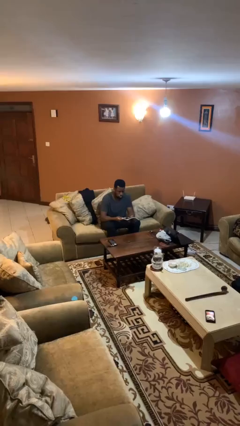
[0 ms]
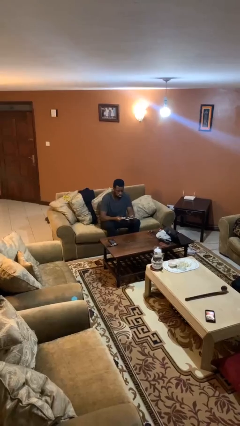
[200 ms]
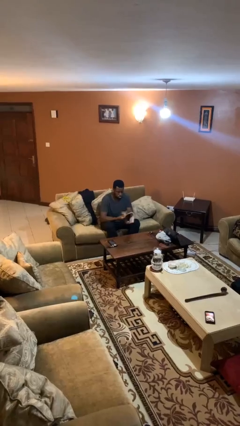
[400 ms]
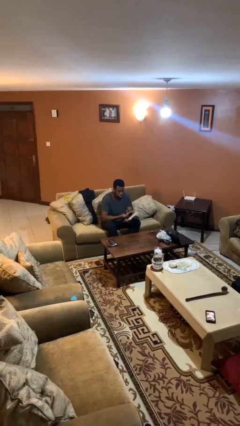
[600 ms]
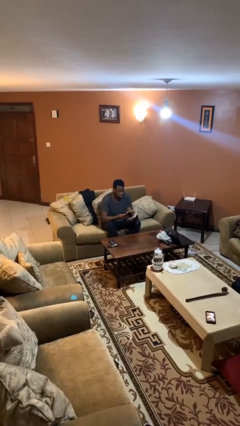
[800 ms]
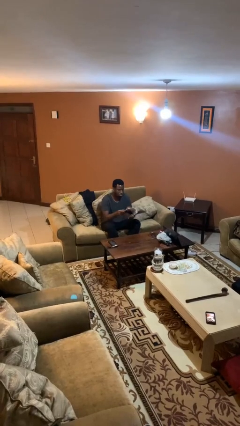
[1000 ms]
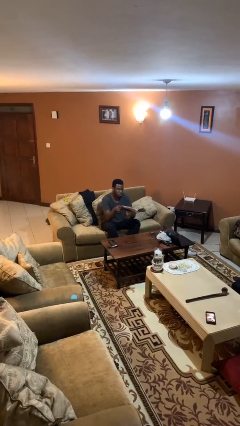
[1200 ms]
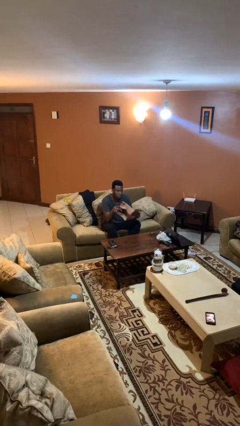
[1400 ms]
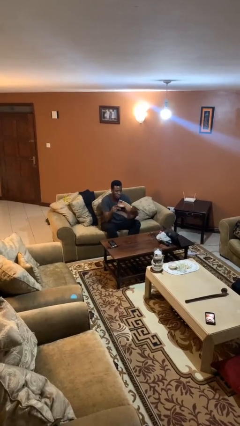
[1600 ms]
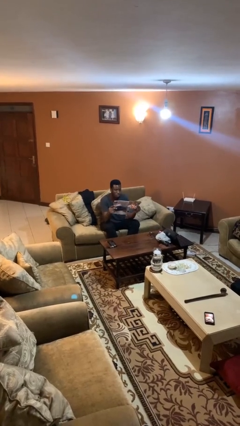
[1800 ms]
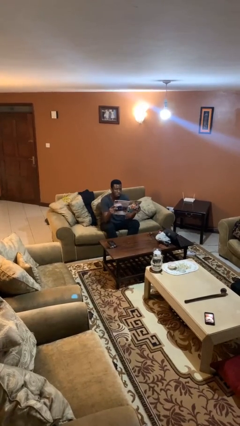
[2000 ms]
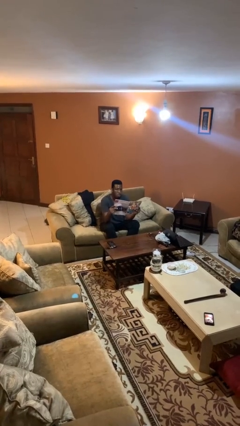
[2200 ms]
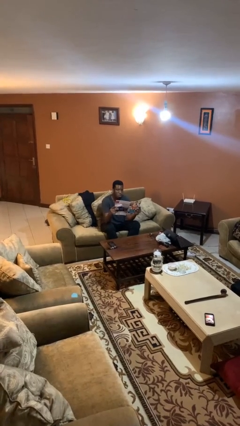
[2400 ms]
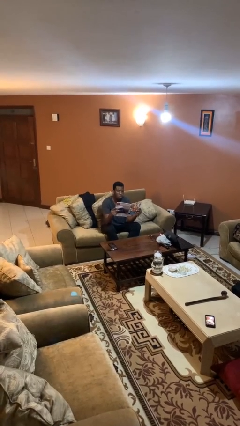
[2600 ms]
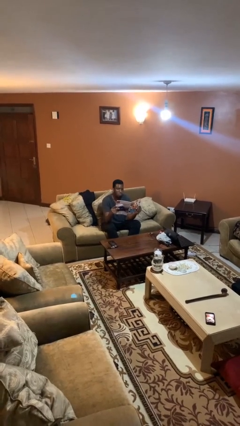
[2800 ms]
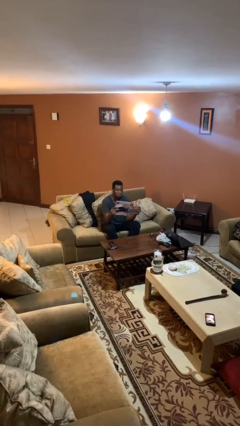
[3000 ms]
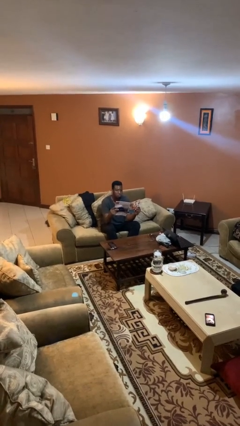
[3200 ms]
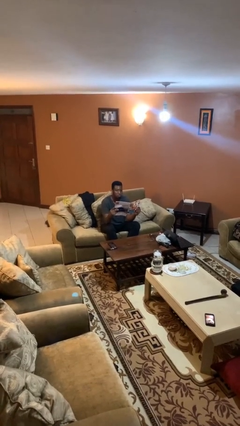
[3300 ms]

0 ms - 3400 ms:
person reads document

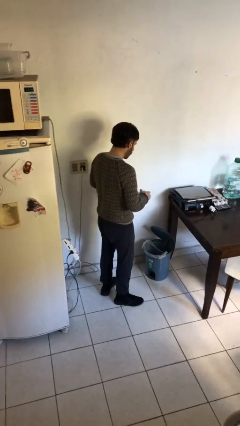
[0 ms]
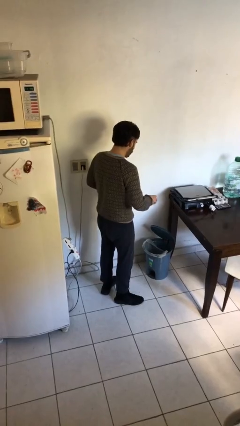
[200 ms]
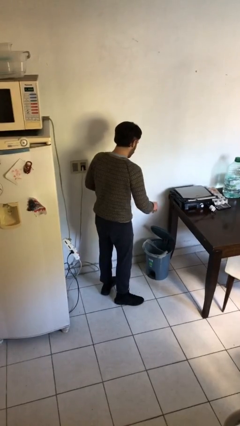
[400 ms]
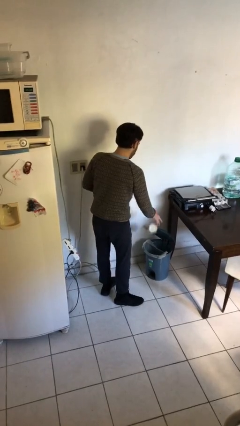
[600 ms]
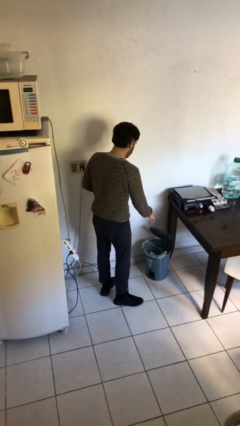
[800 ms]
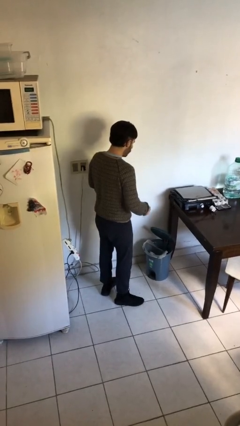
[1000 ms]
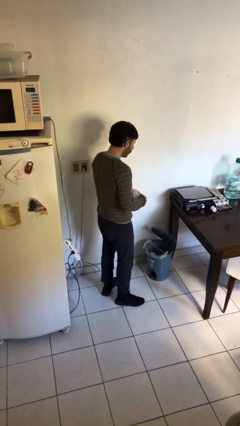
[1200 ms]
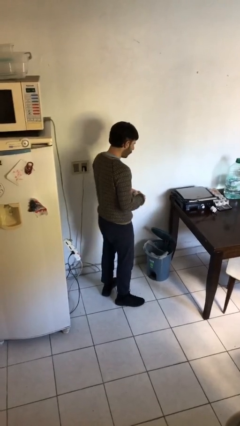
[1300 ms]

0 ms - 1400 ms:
person discards trash

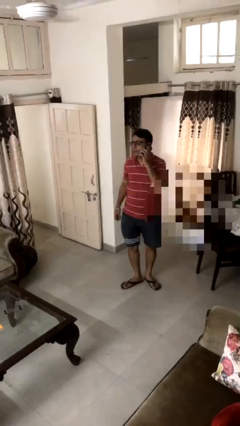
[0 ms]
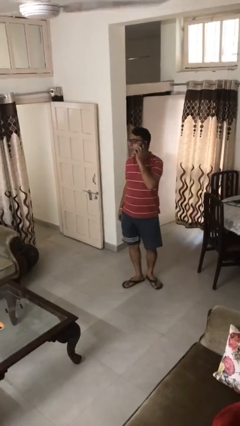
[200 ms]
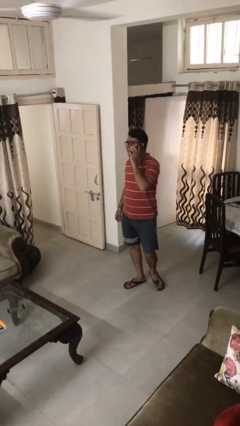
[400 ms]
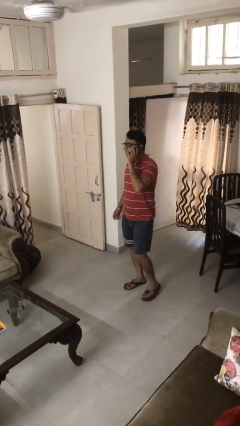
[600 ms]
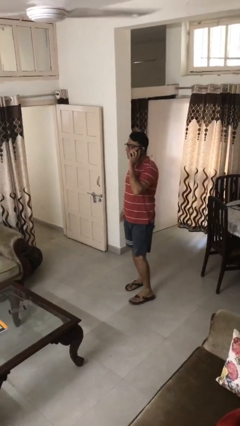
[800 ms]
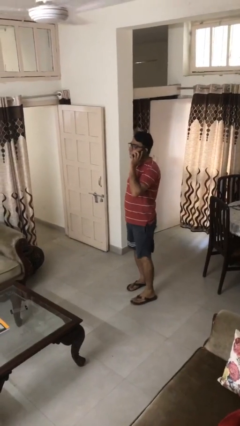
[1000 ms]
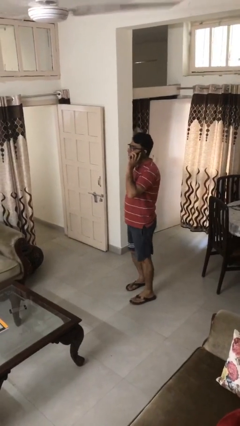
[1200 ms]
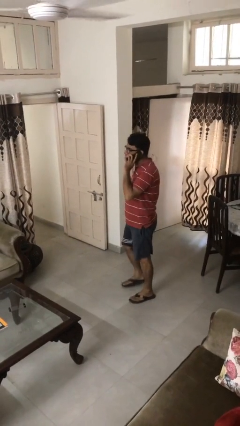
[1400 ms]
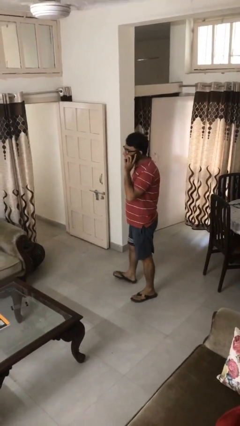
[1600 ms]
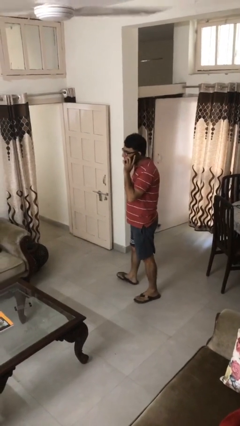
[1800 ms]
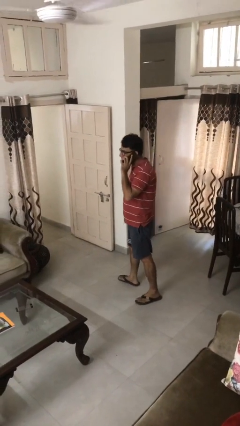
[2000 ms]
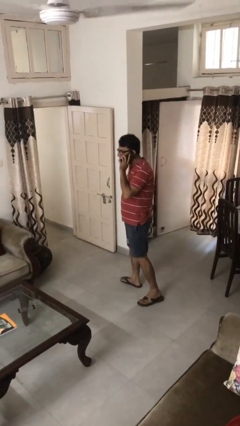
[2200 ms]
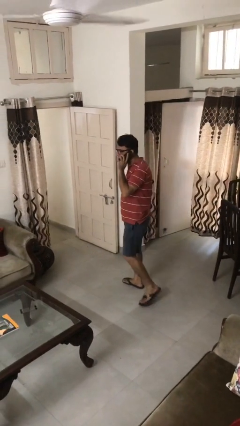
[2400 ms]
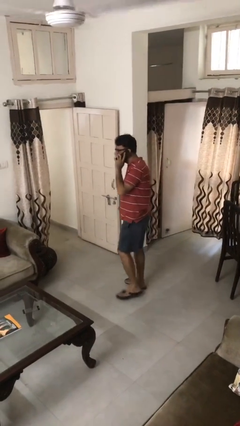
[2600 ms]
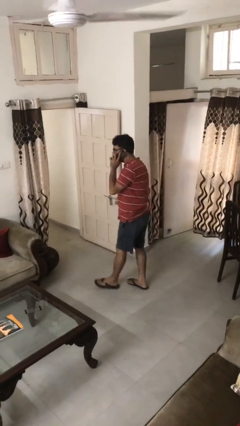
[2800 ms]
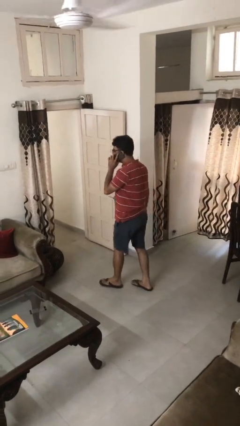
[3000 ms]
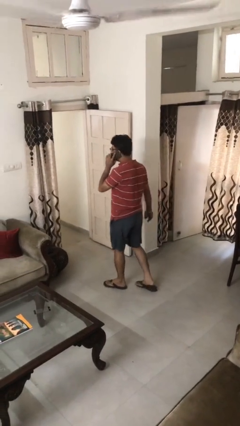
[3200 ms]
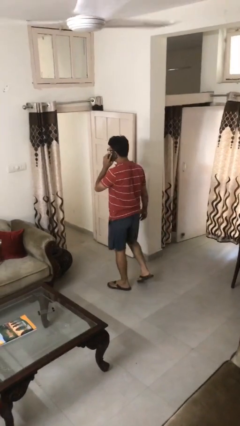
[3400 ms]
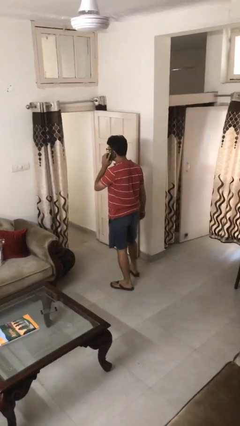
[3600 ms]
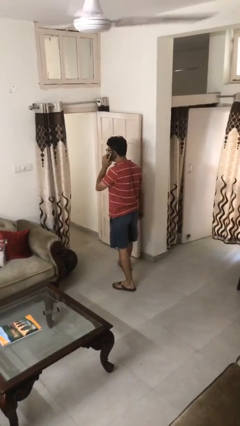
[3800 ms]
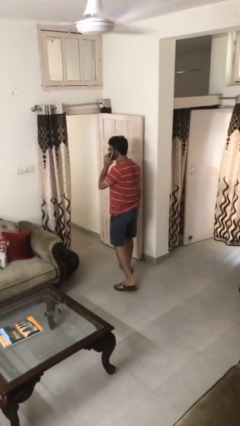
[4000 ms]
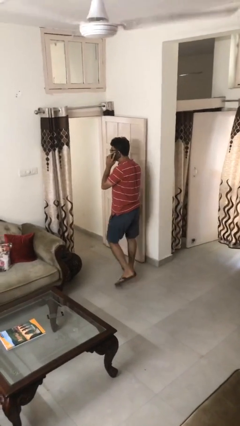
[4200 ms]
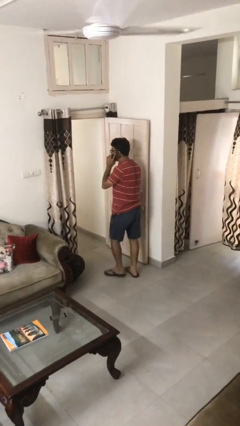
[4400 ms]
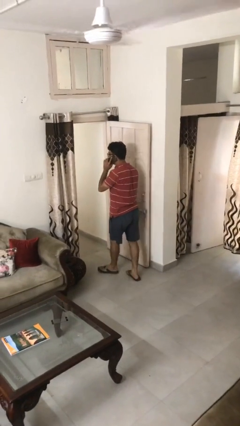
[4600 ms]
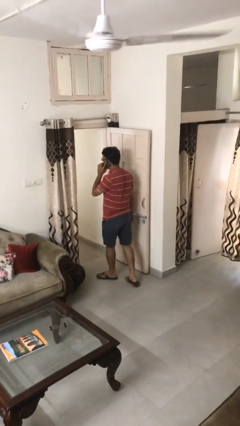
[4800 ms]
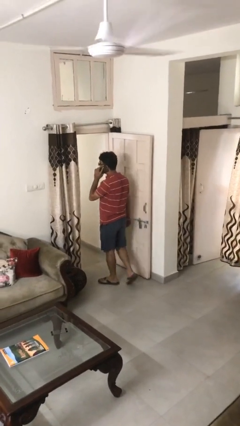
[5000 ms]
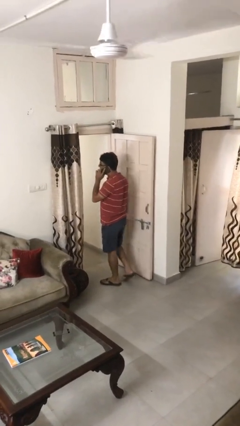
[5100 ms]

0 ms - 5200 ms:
person talks on phone

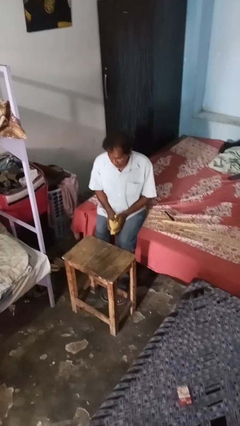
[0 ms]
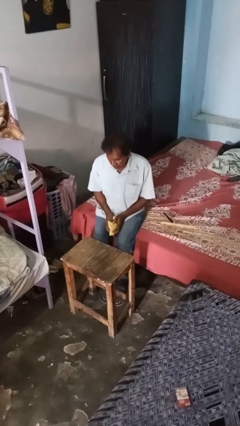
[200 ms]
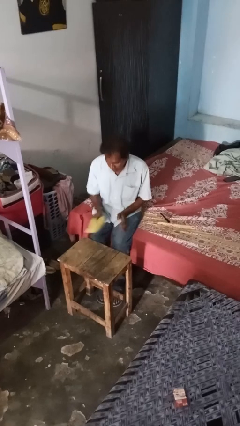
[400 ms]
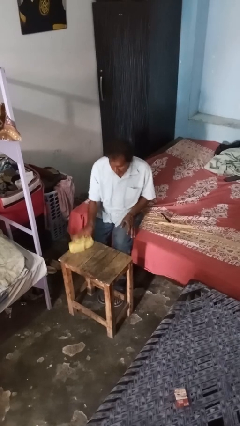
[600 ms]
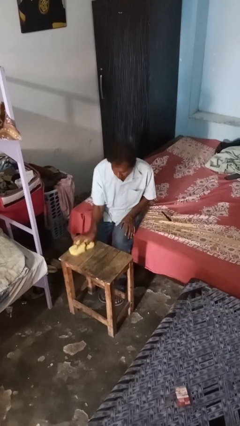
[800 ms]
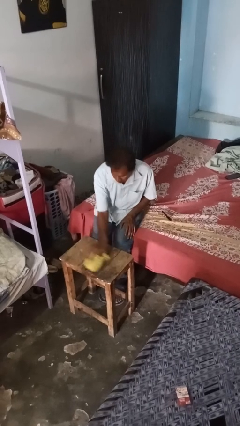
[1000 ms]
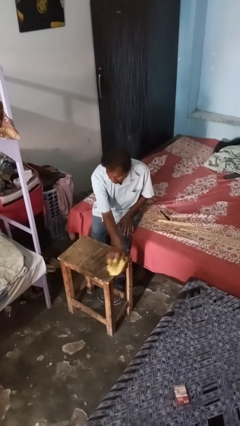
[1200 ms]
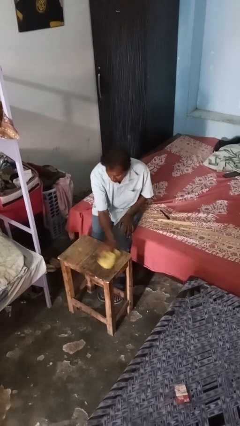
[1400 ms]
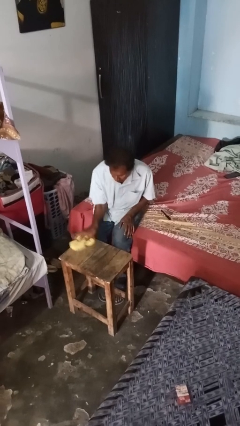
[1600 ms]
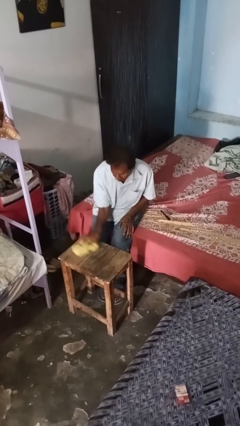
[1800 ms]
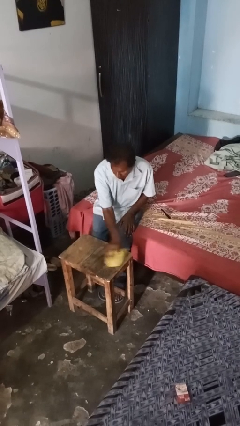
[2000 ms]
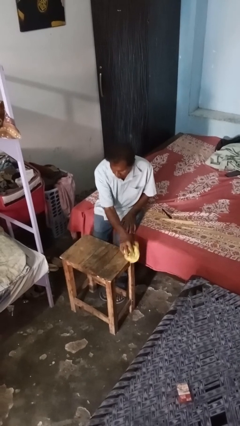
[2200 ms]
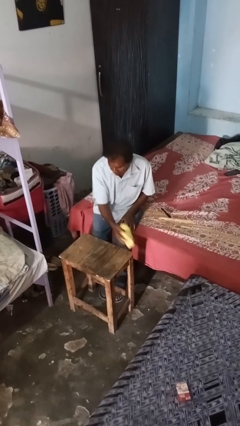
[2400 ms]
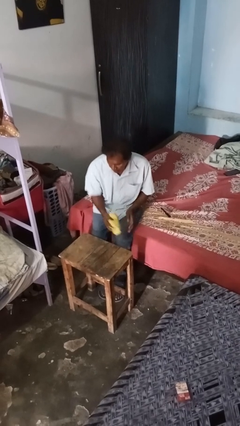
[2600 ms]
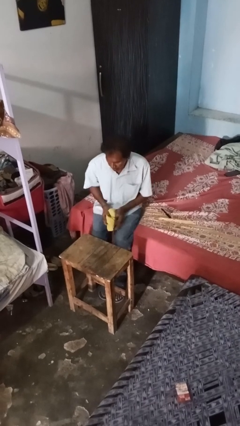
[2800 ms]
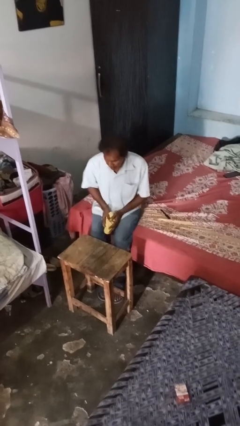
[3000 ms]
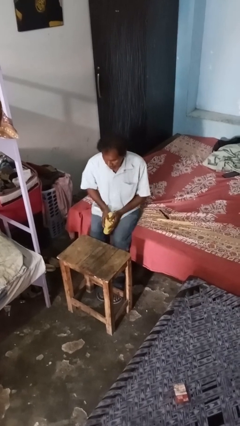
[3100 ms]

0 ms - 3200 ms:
person cleans table with rag

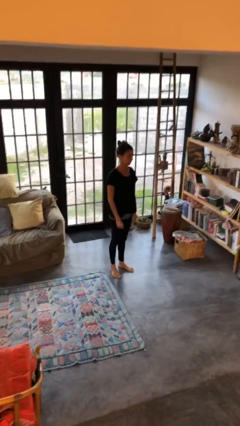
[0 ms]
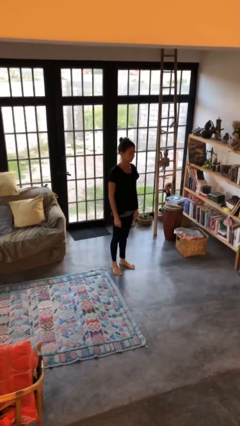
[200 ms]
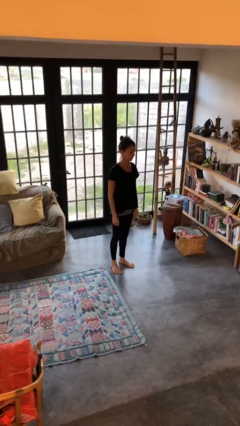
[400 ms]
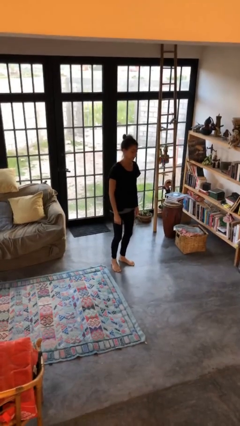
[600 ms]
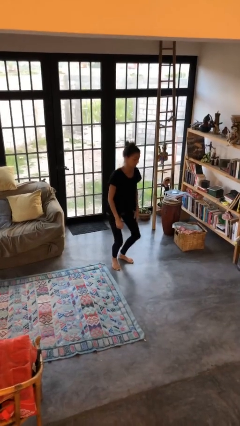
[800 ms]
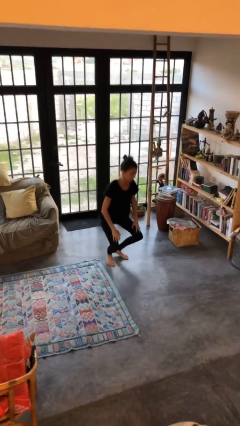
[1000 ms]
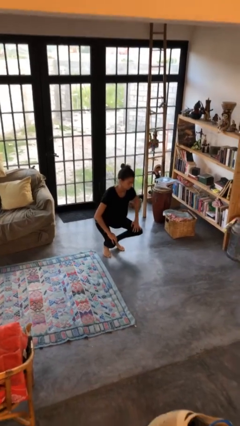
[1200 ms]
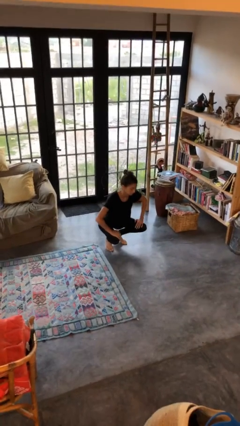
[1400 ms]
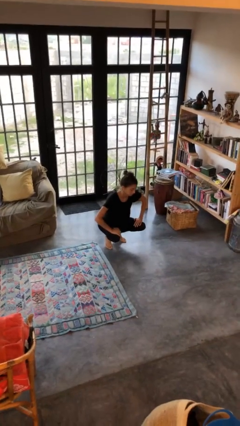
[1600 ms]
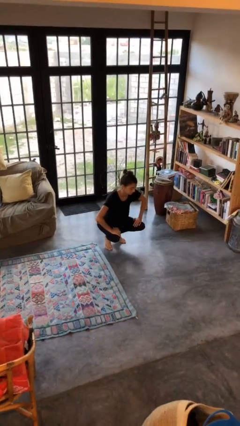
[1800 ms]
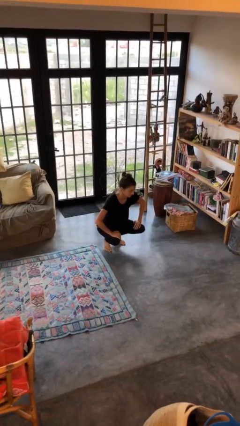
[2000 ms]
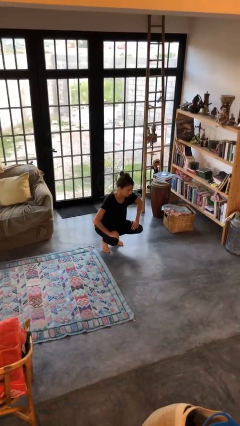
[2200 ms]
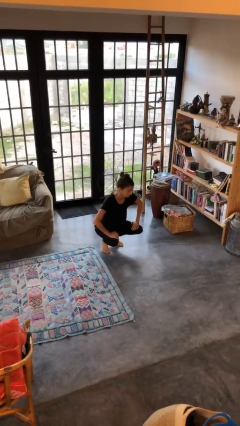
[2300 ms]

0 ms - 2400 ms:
person squats

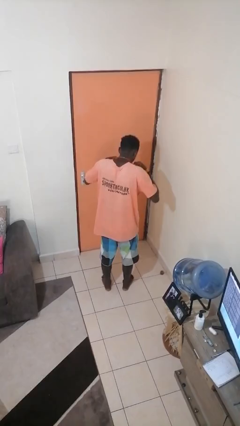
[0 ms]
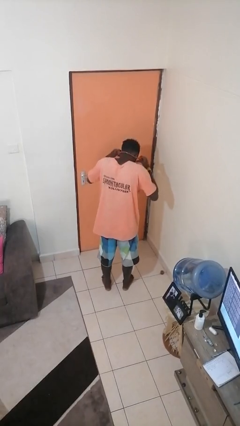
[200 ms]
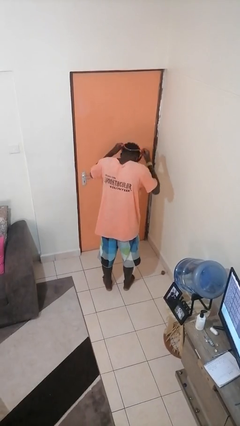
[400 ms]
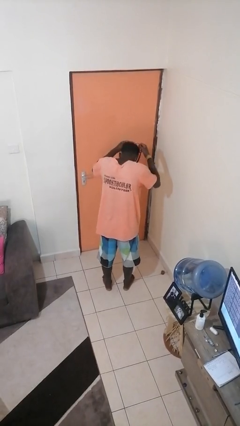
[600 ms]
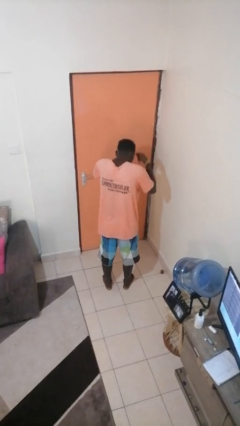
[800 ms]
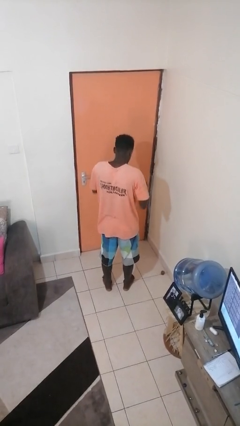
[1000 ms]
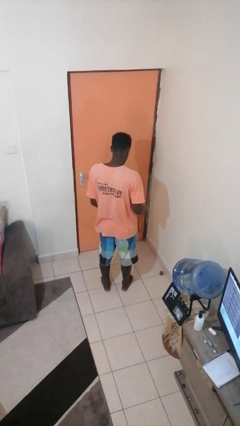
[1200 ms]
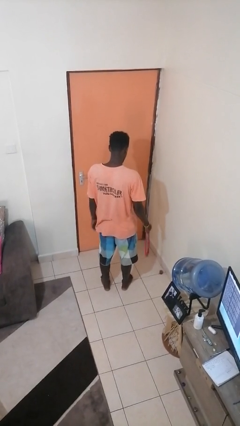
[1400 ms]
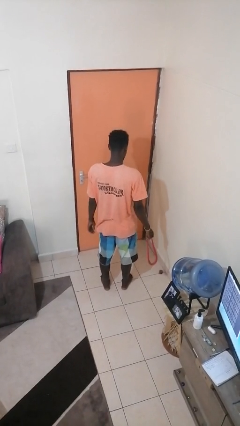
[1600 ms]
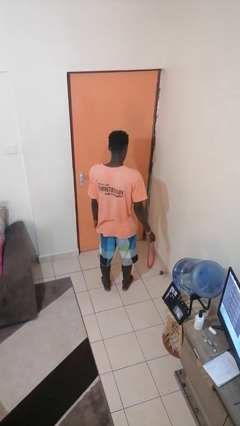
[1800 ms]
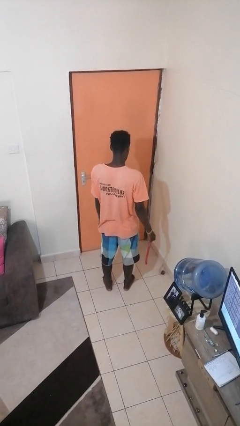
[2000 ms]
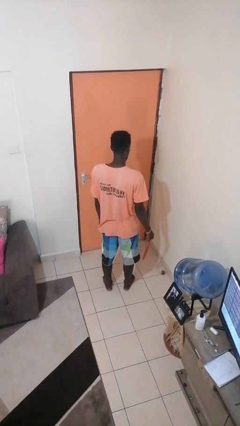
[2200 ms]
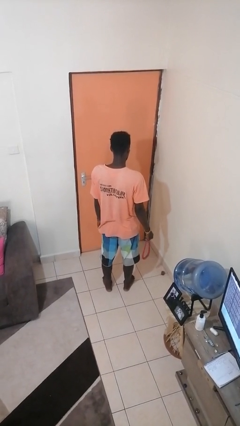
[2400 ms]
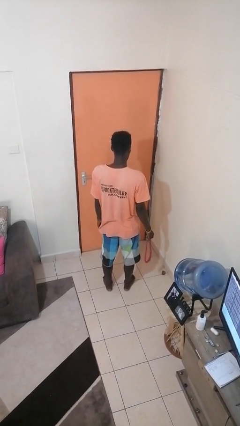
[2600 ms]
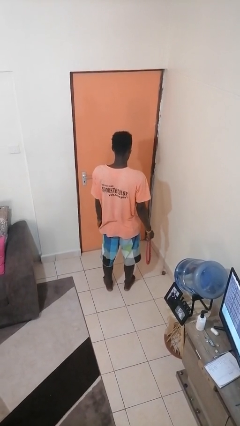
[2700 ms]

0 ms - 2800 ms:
person takes off necklace
